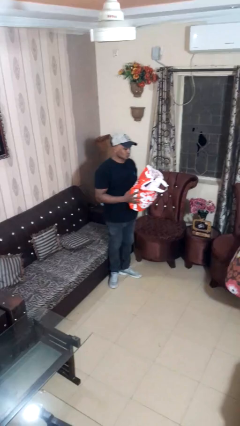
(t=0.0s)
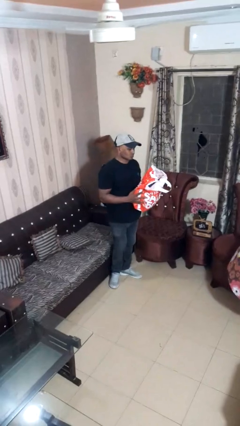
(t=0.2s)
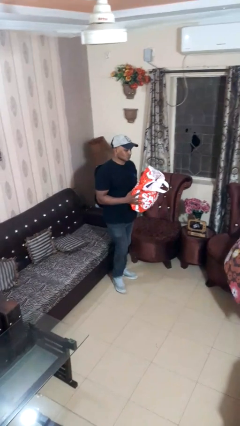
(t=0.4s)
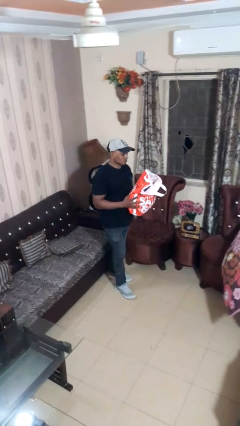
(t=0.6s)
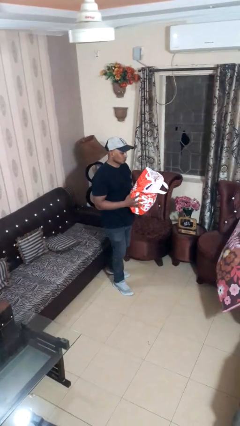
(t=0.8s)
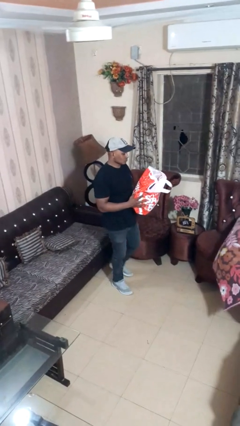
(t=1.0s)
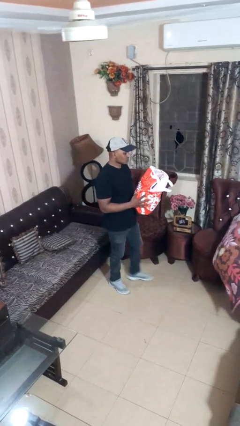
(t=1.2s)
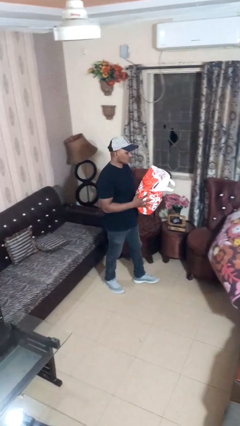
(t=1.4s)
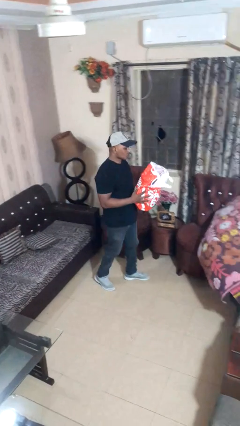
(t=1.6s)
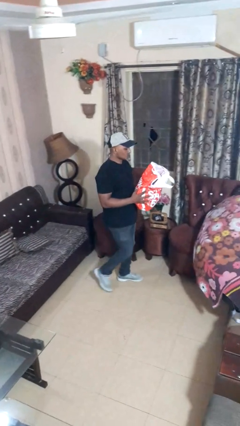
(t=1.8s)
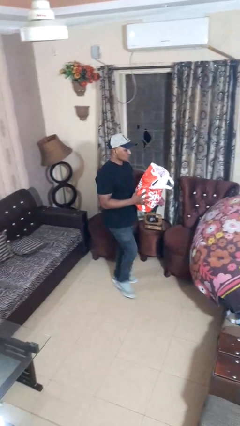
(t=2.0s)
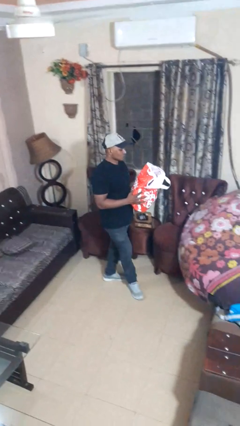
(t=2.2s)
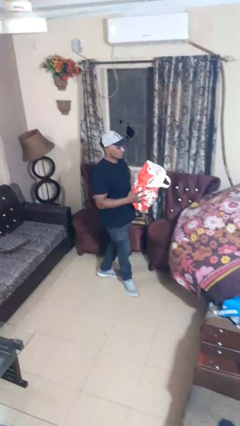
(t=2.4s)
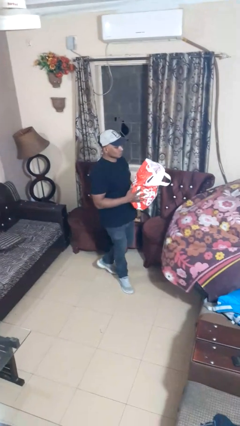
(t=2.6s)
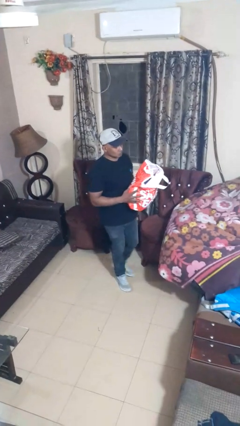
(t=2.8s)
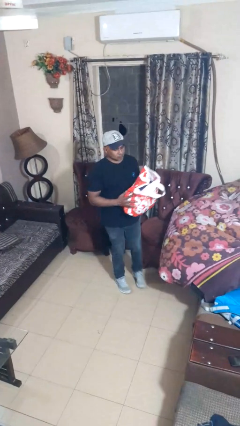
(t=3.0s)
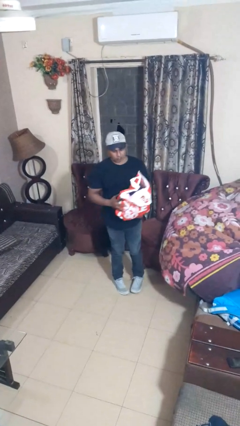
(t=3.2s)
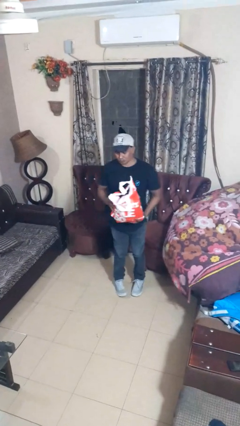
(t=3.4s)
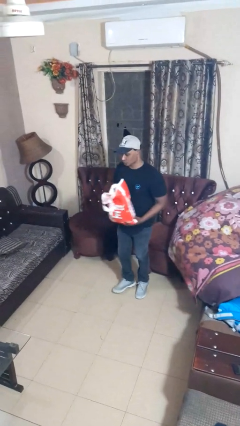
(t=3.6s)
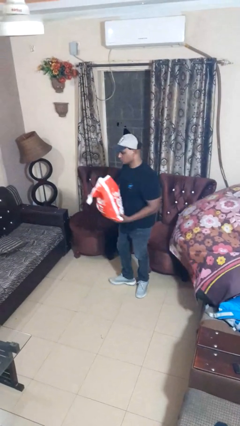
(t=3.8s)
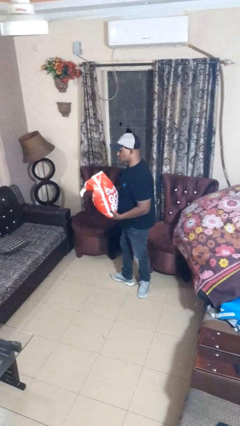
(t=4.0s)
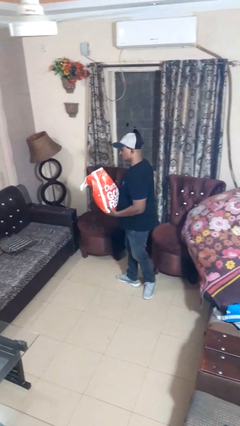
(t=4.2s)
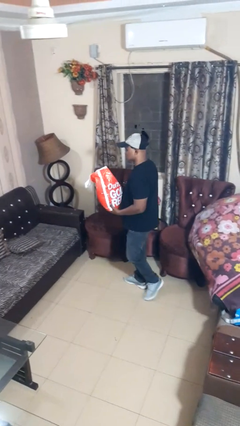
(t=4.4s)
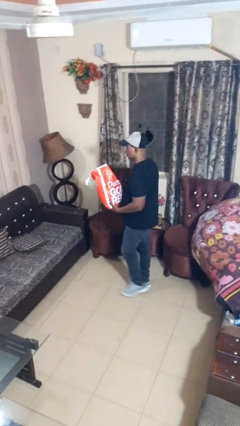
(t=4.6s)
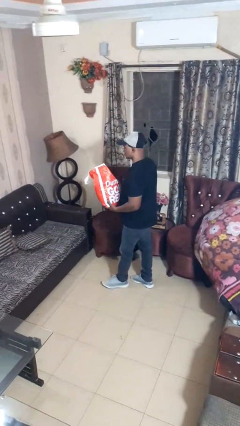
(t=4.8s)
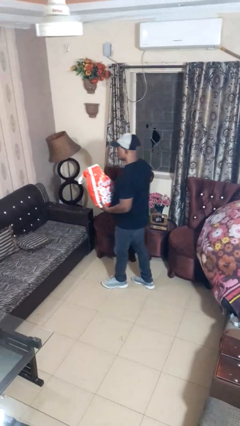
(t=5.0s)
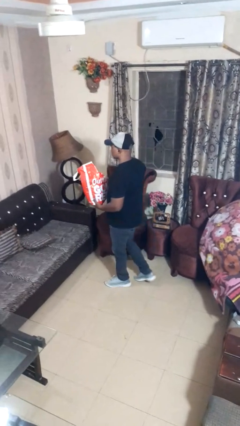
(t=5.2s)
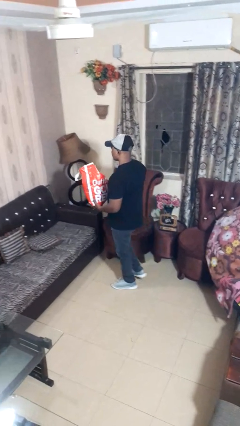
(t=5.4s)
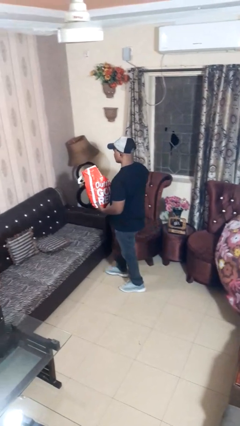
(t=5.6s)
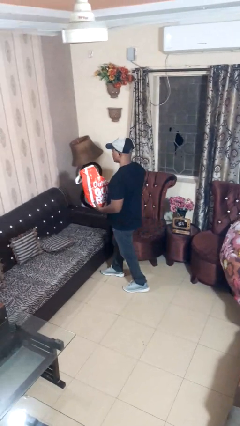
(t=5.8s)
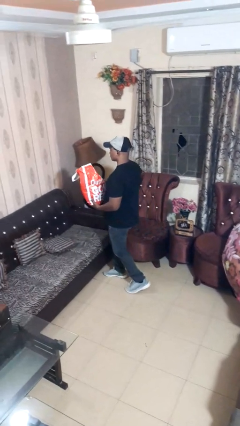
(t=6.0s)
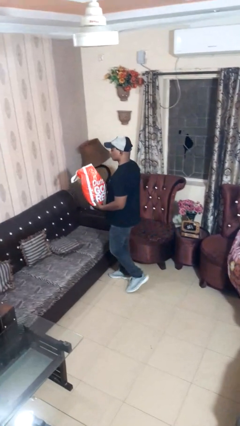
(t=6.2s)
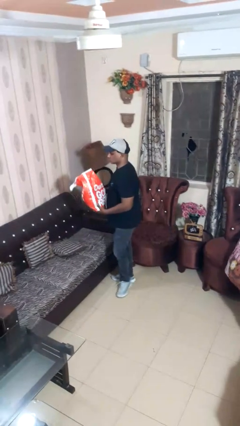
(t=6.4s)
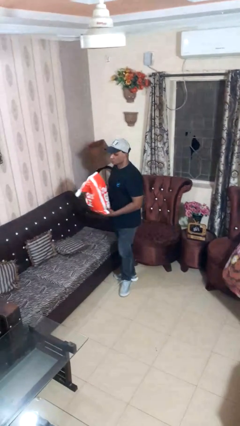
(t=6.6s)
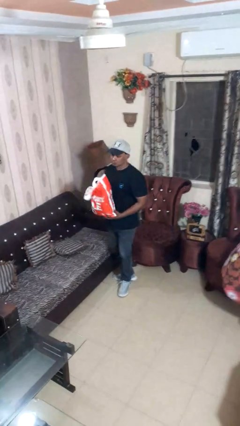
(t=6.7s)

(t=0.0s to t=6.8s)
person carries groceries

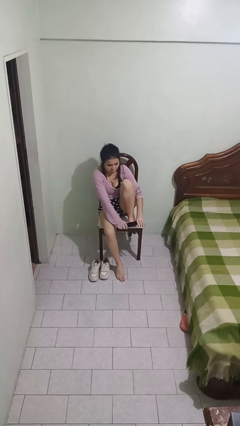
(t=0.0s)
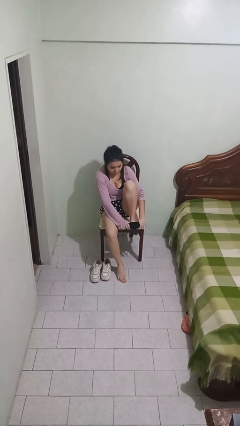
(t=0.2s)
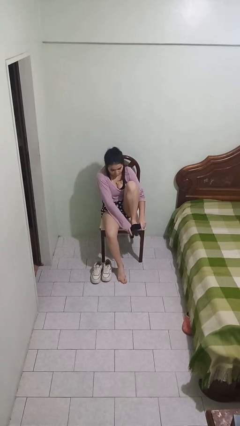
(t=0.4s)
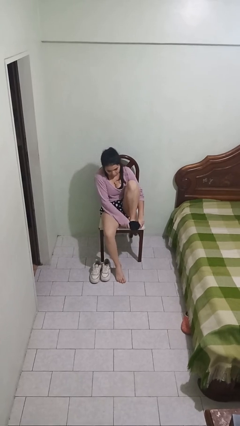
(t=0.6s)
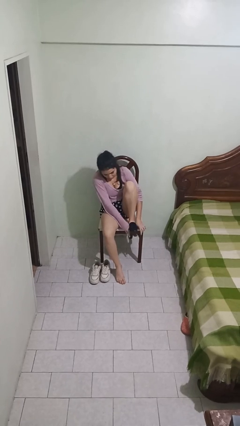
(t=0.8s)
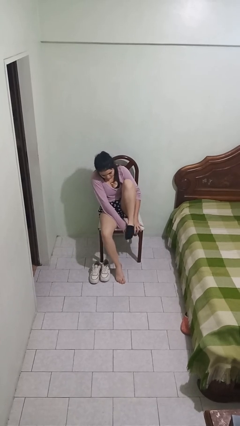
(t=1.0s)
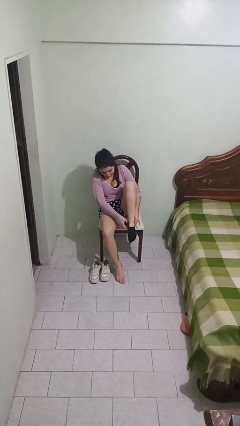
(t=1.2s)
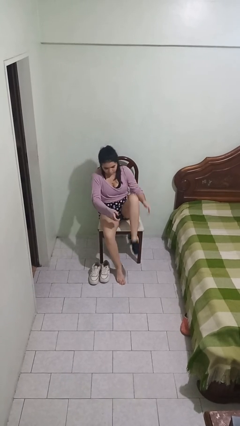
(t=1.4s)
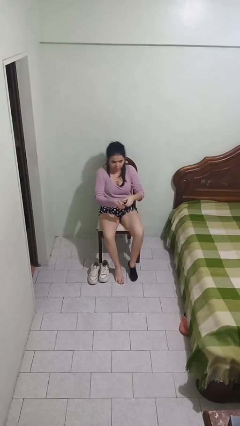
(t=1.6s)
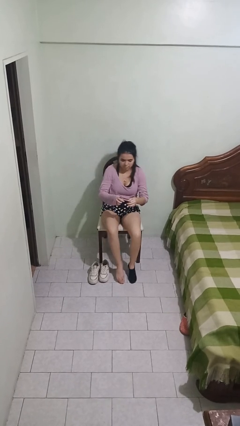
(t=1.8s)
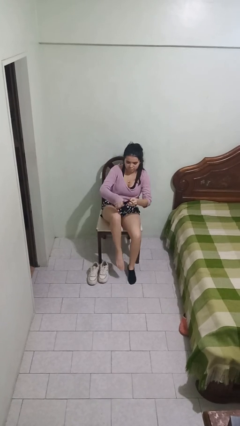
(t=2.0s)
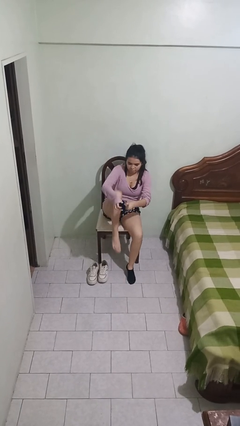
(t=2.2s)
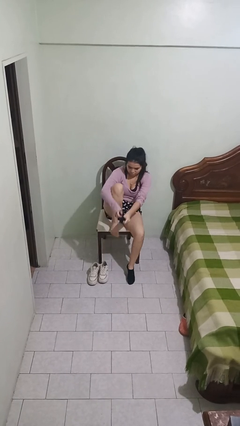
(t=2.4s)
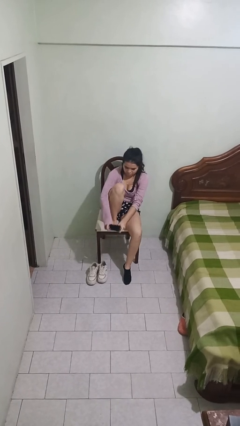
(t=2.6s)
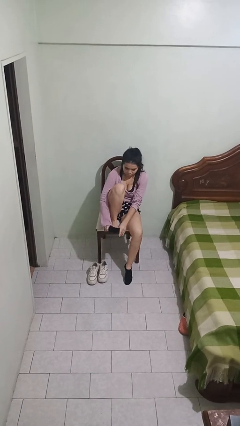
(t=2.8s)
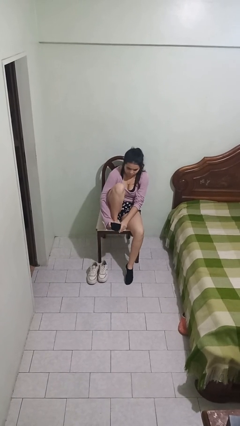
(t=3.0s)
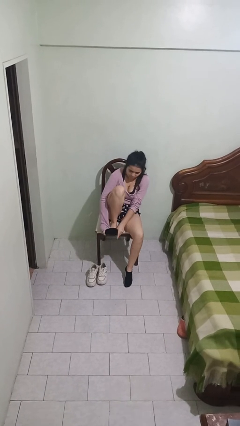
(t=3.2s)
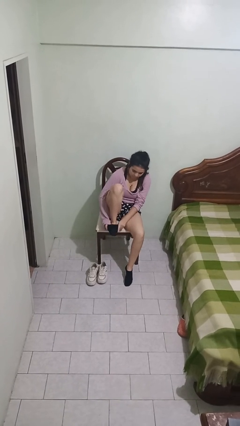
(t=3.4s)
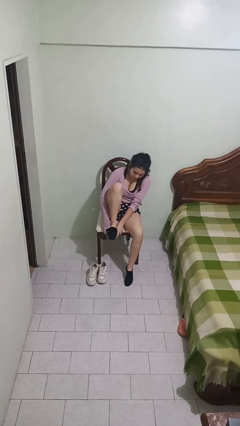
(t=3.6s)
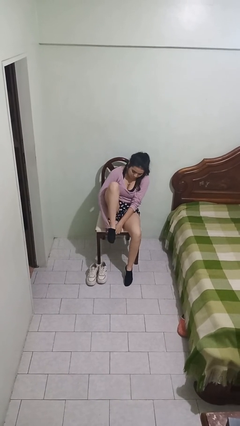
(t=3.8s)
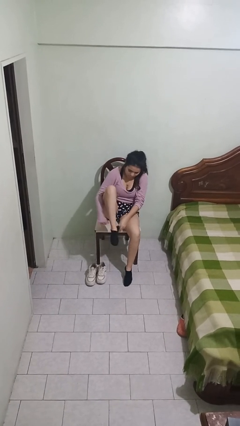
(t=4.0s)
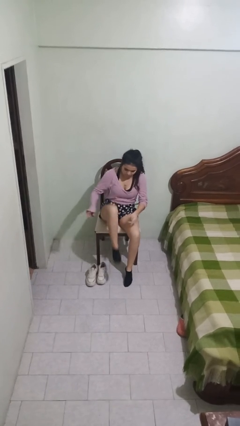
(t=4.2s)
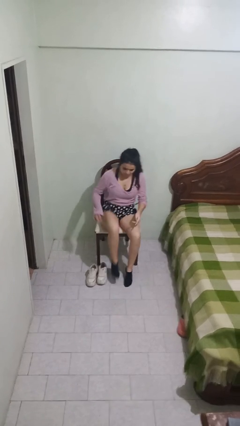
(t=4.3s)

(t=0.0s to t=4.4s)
person puts on socks

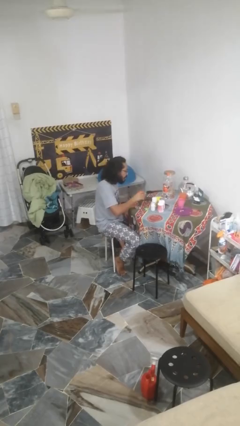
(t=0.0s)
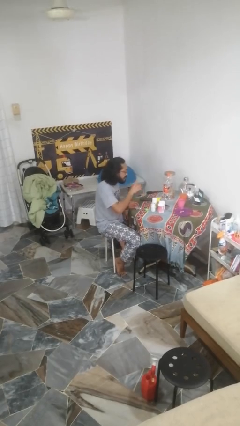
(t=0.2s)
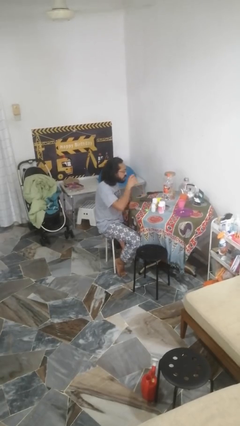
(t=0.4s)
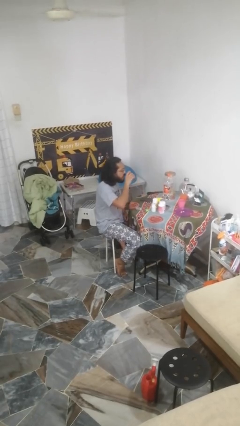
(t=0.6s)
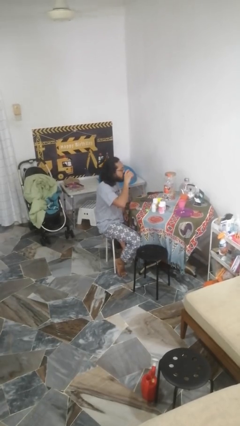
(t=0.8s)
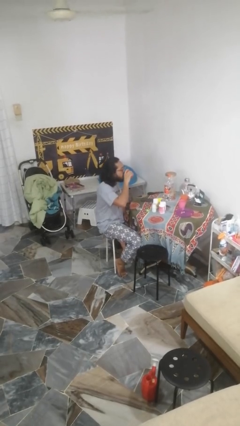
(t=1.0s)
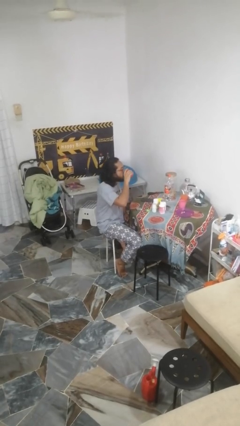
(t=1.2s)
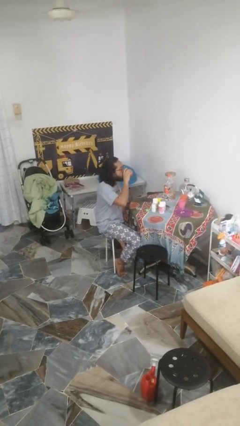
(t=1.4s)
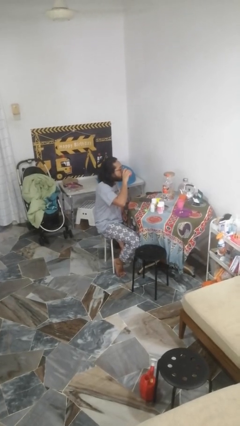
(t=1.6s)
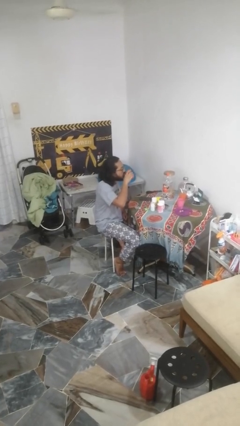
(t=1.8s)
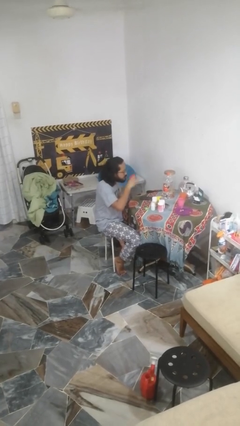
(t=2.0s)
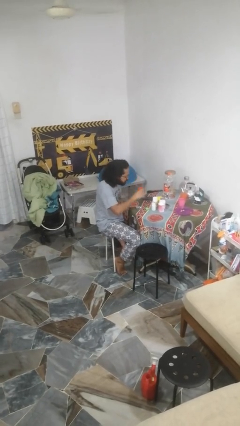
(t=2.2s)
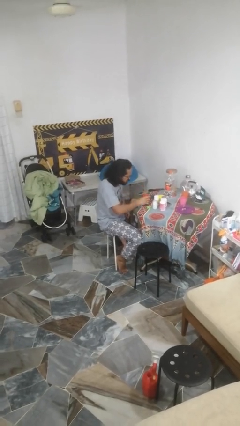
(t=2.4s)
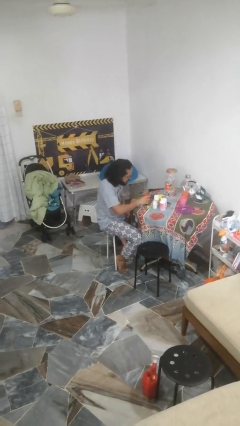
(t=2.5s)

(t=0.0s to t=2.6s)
person drinks from cup

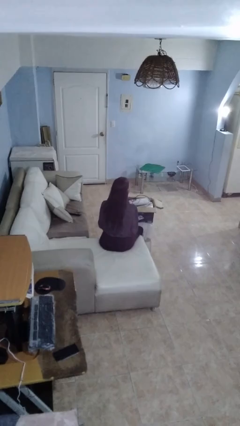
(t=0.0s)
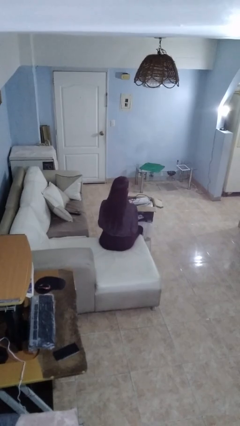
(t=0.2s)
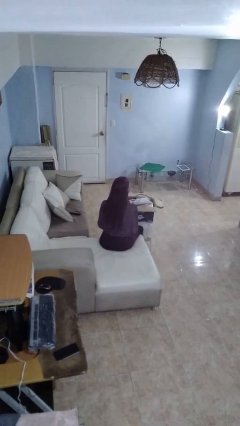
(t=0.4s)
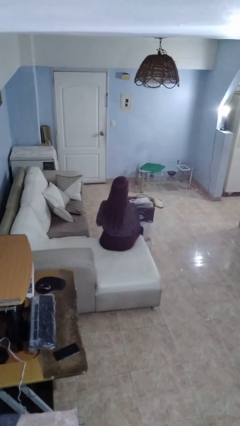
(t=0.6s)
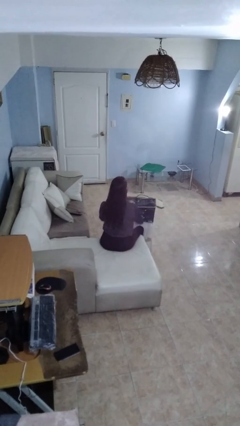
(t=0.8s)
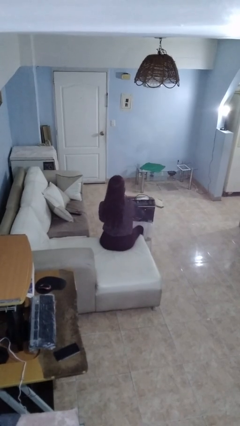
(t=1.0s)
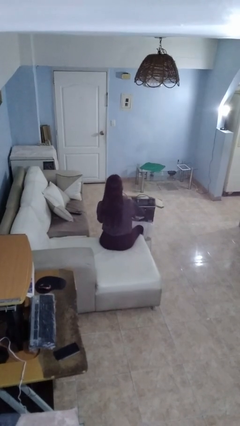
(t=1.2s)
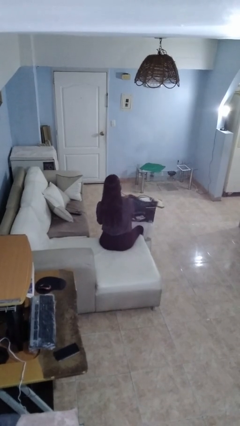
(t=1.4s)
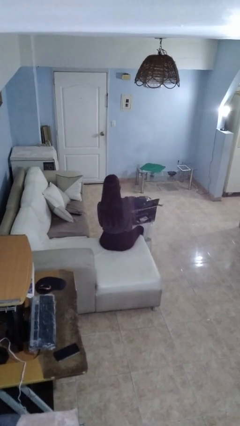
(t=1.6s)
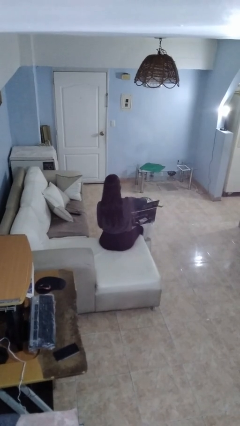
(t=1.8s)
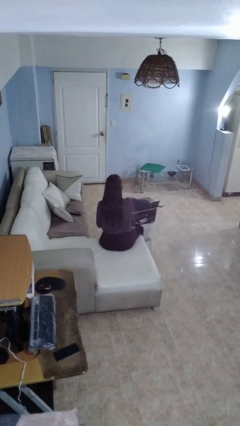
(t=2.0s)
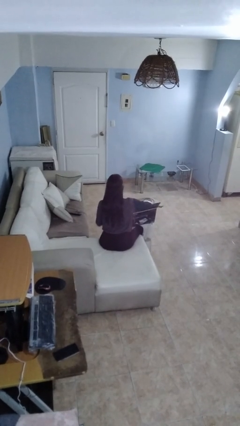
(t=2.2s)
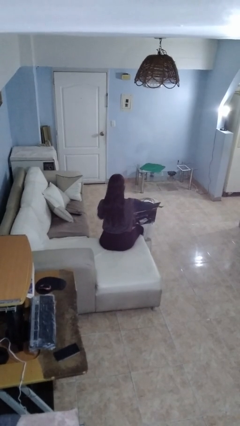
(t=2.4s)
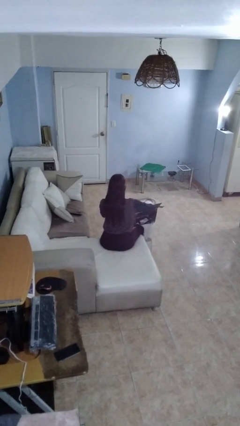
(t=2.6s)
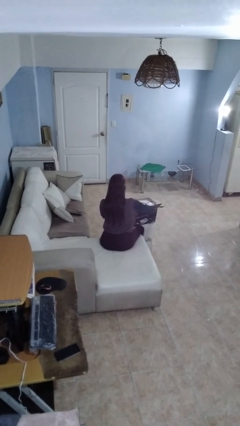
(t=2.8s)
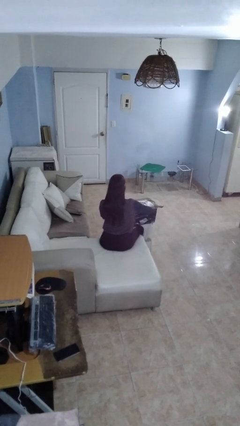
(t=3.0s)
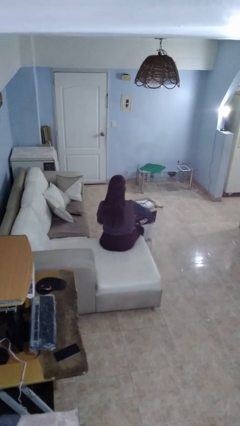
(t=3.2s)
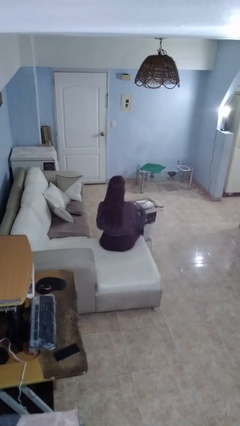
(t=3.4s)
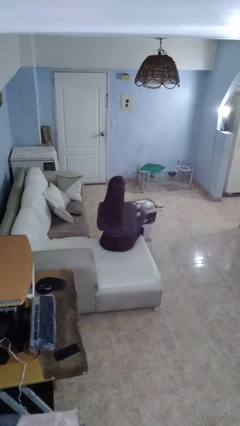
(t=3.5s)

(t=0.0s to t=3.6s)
person searches in box
